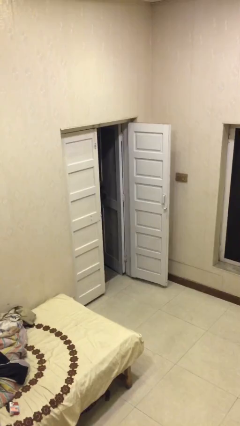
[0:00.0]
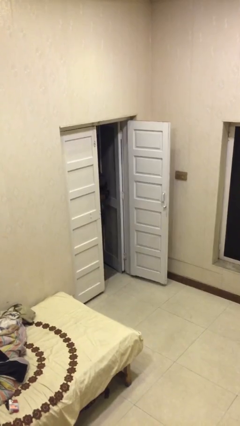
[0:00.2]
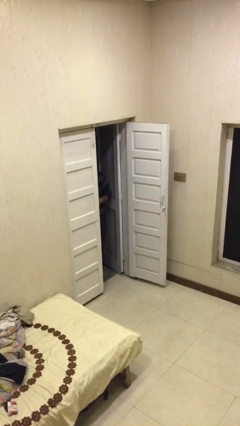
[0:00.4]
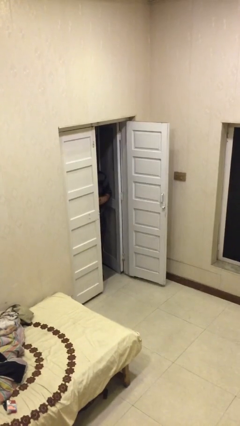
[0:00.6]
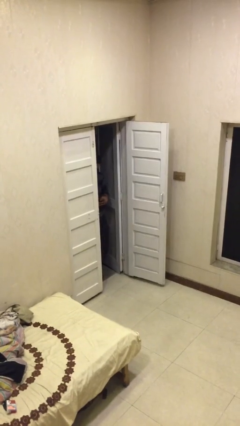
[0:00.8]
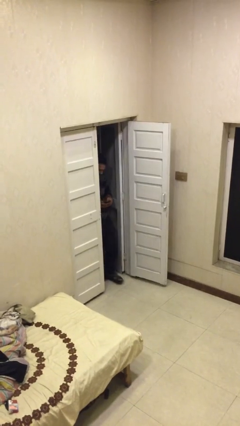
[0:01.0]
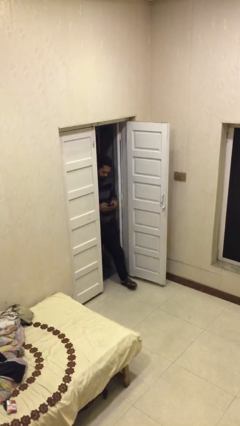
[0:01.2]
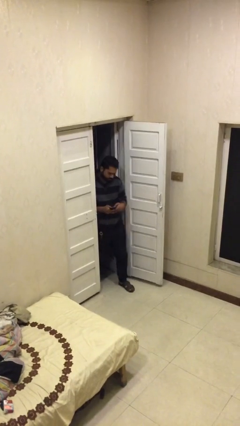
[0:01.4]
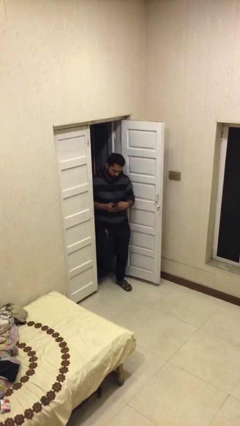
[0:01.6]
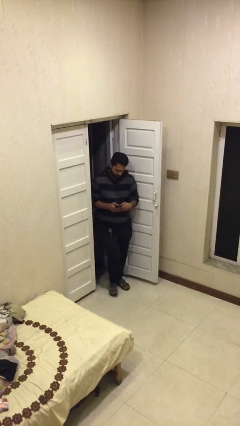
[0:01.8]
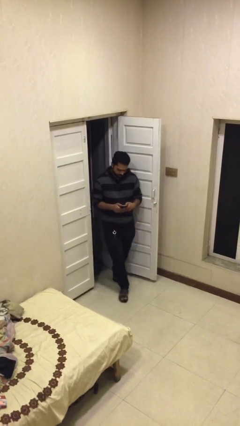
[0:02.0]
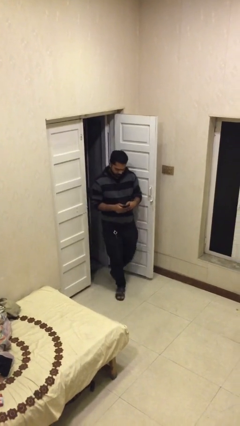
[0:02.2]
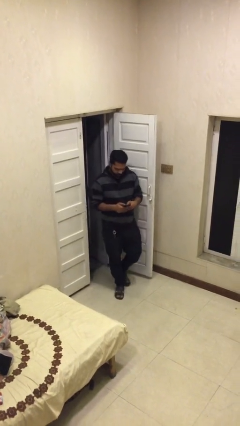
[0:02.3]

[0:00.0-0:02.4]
person enters scene through structure

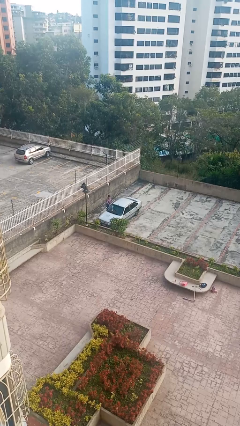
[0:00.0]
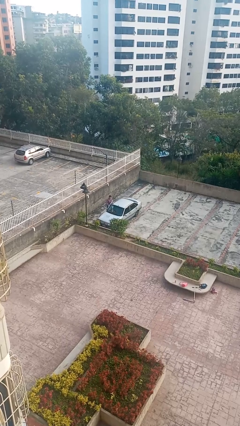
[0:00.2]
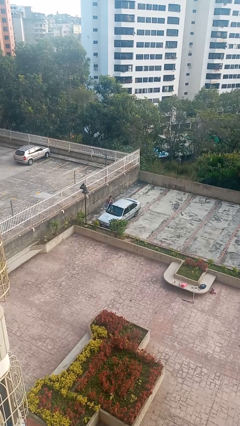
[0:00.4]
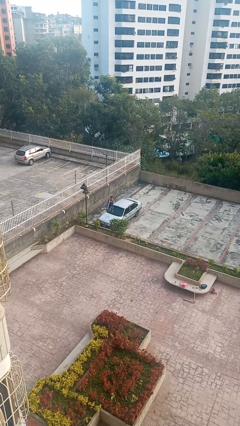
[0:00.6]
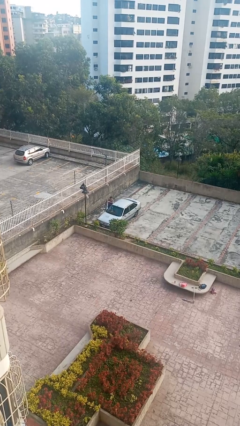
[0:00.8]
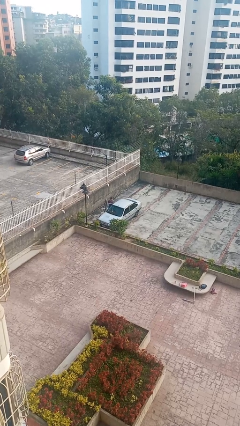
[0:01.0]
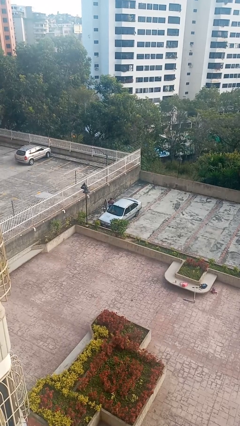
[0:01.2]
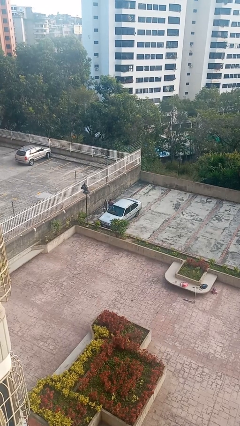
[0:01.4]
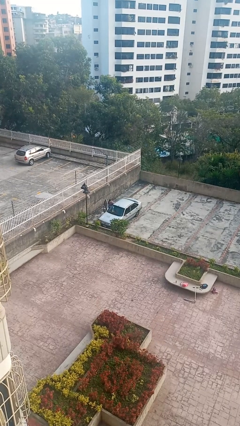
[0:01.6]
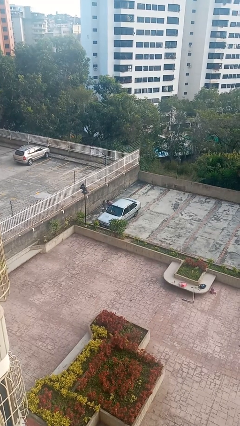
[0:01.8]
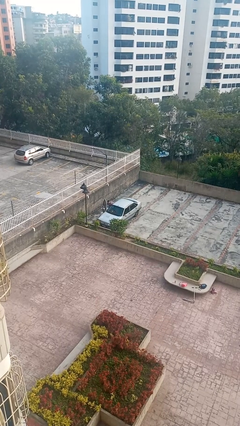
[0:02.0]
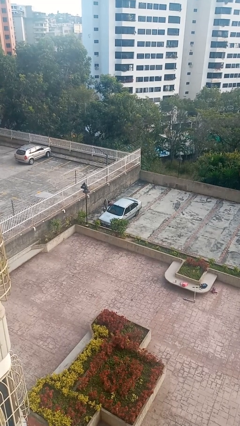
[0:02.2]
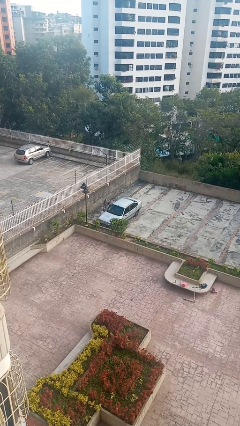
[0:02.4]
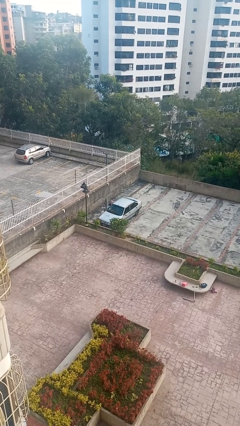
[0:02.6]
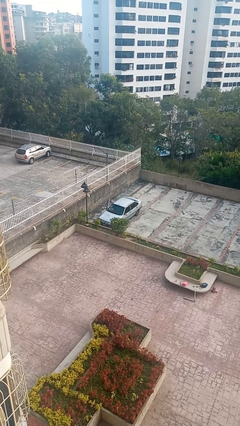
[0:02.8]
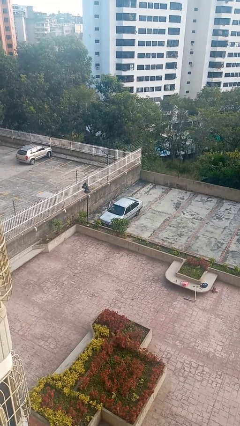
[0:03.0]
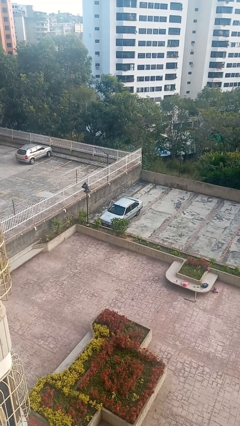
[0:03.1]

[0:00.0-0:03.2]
car picks up person

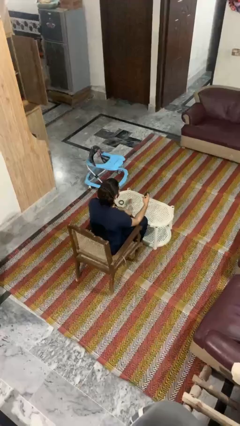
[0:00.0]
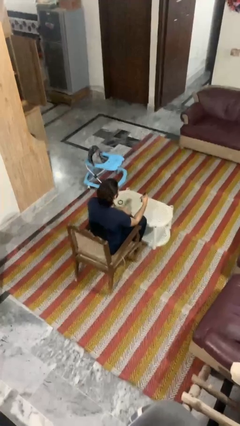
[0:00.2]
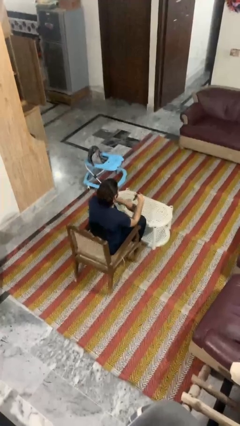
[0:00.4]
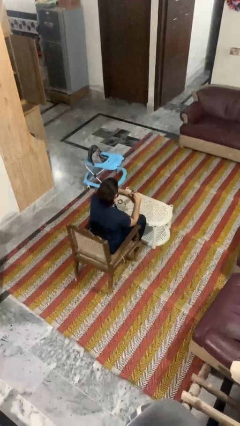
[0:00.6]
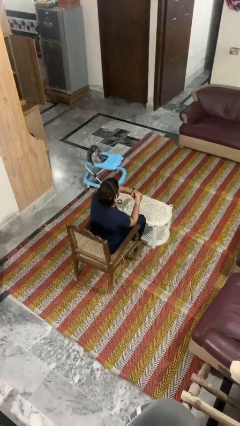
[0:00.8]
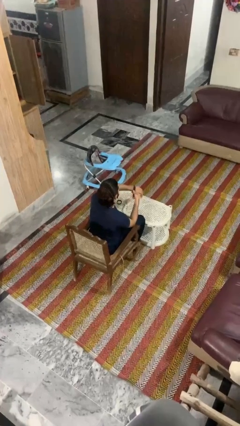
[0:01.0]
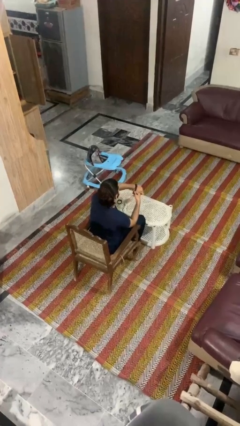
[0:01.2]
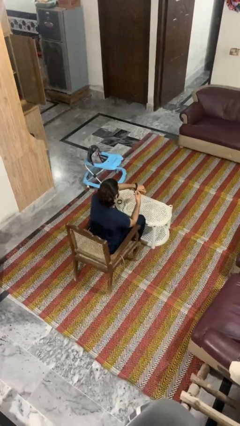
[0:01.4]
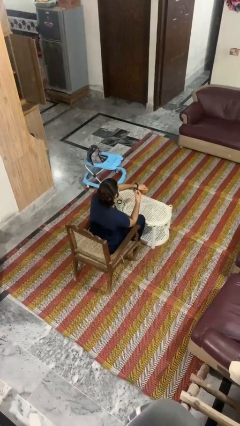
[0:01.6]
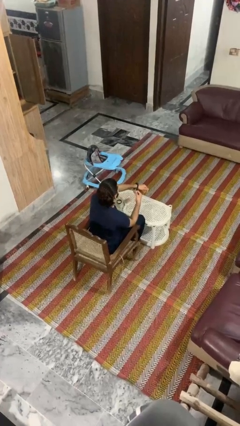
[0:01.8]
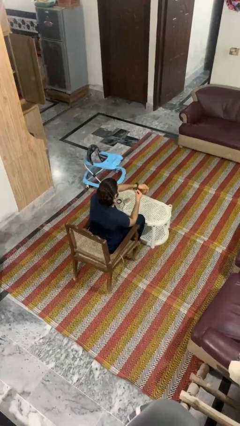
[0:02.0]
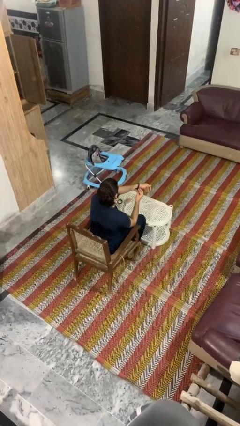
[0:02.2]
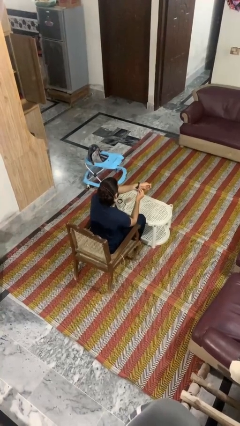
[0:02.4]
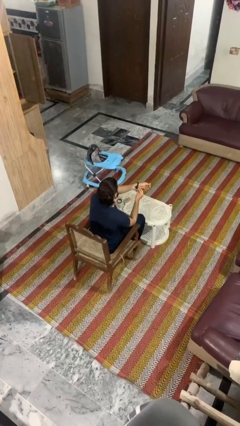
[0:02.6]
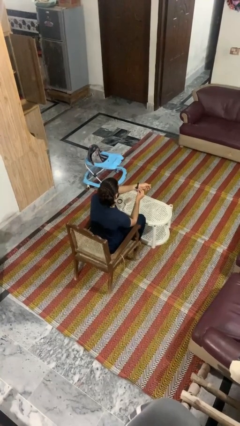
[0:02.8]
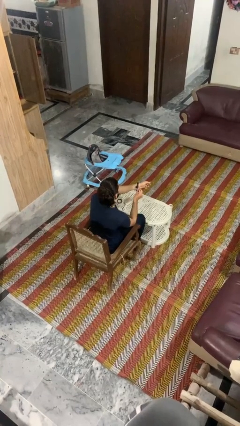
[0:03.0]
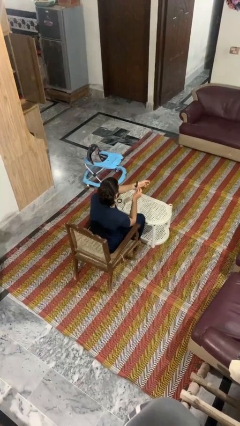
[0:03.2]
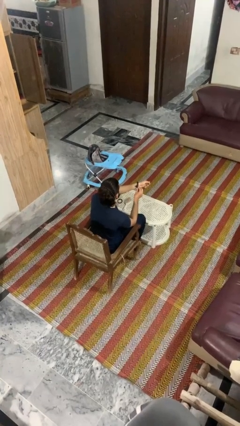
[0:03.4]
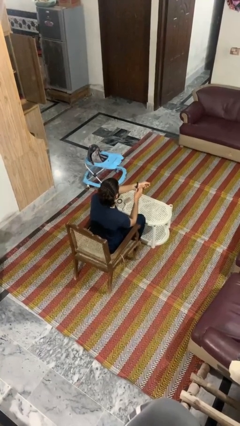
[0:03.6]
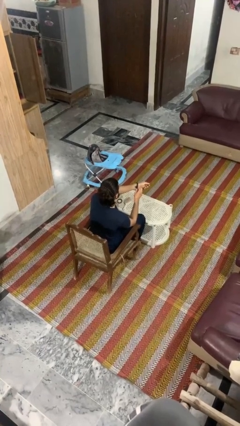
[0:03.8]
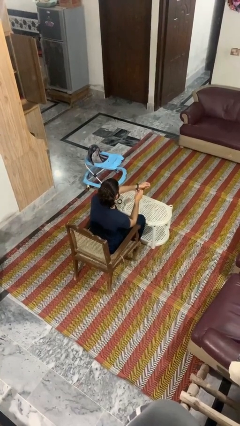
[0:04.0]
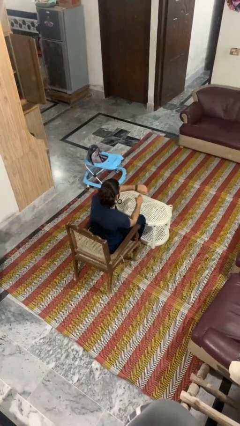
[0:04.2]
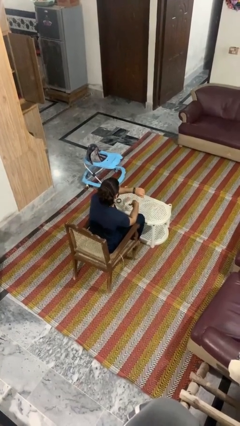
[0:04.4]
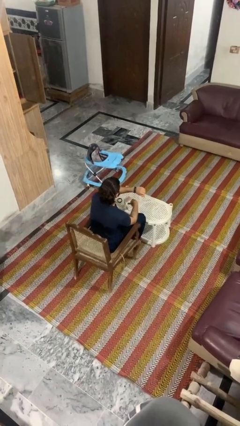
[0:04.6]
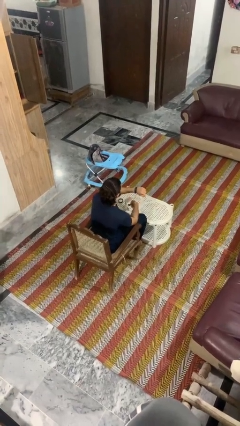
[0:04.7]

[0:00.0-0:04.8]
person puts on wristwatch

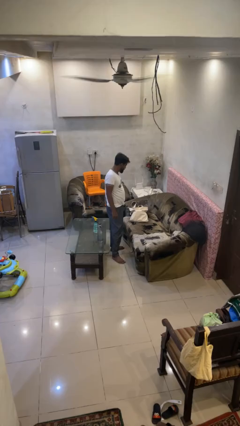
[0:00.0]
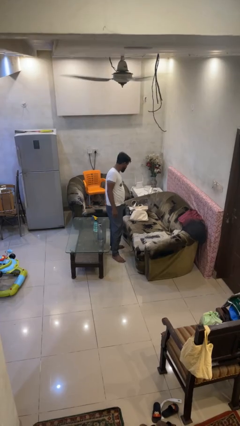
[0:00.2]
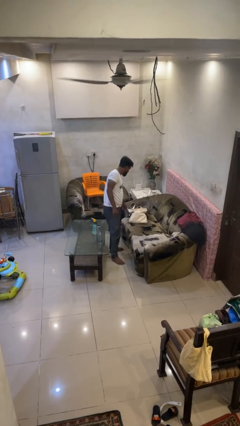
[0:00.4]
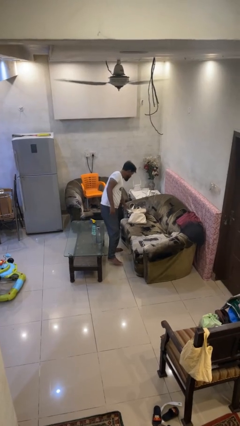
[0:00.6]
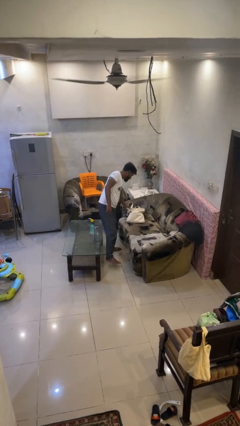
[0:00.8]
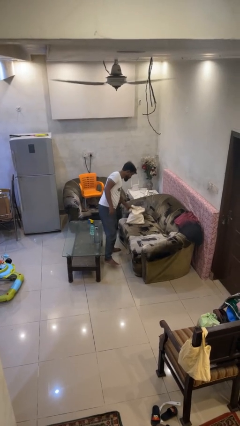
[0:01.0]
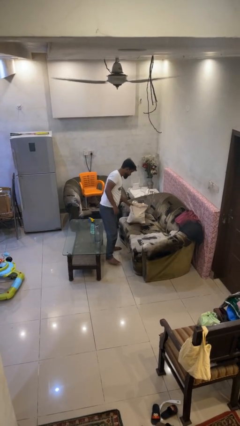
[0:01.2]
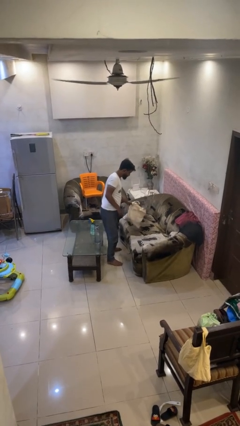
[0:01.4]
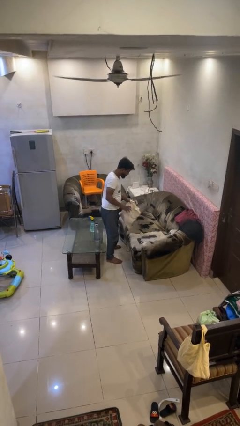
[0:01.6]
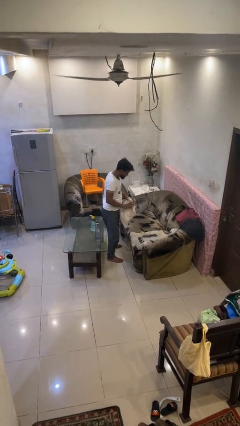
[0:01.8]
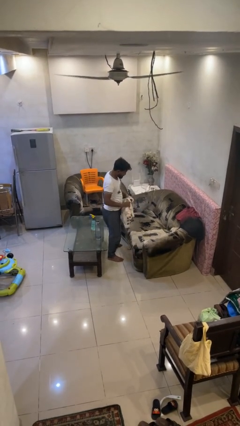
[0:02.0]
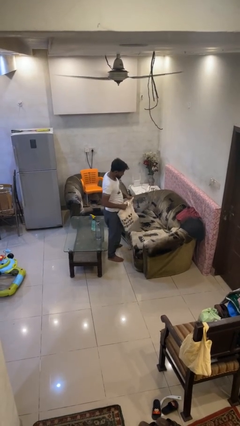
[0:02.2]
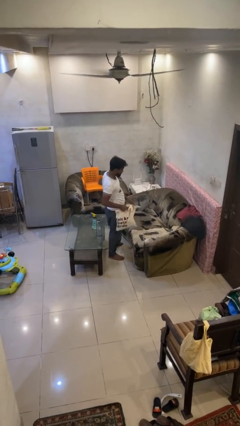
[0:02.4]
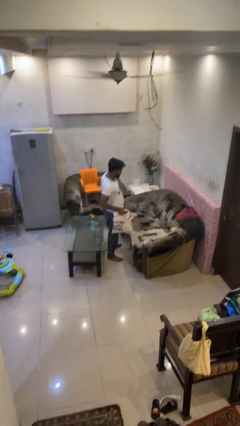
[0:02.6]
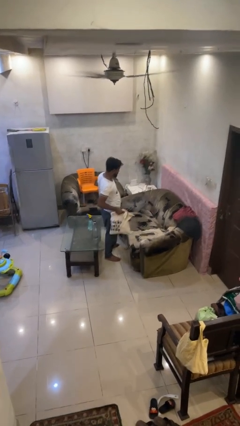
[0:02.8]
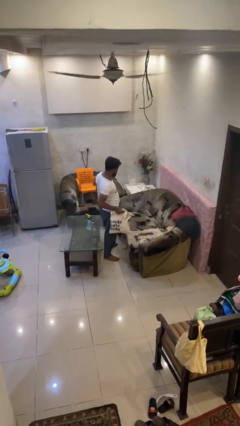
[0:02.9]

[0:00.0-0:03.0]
person picks up object from couch

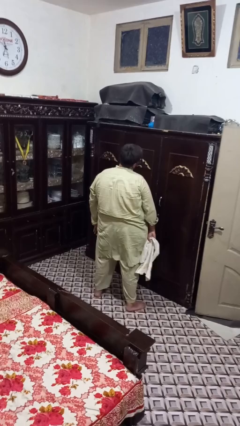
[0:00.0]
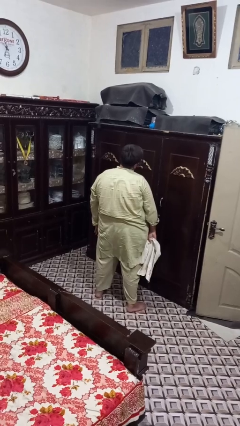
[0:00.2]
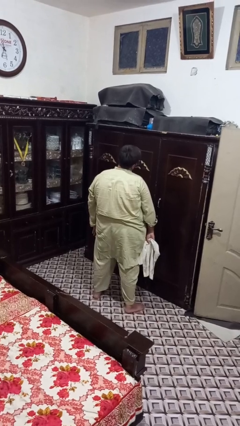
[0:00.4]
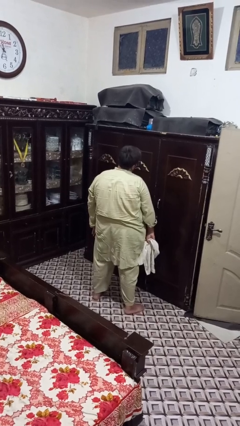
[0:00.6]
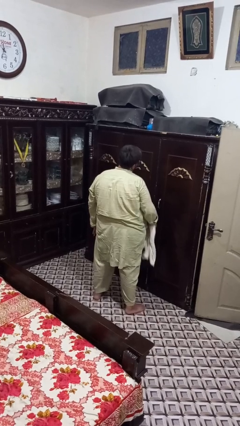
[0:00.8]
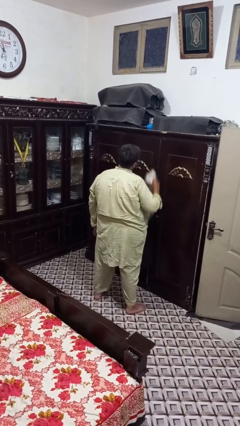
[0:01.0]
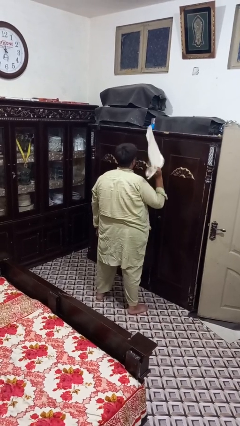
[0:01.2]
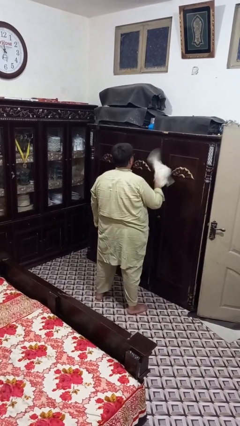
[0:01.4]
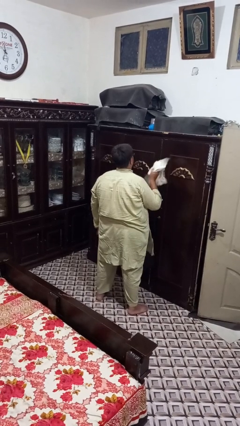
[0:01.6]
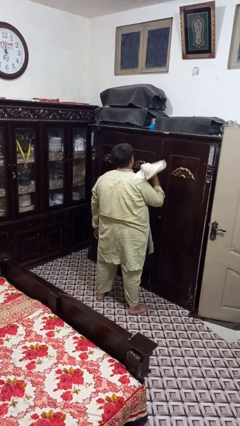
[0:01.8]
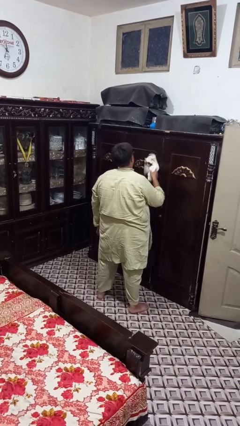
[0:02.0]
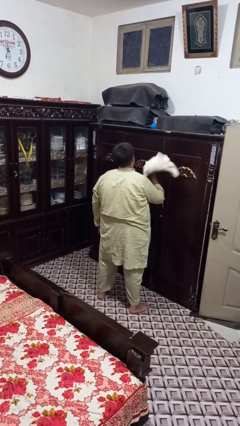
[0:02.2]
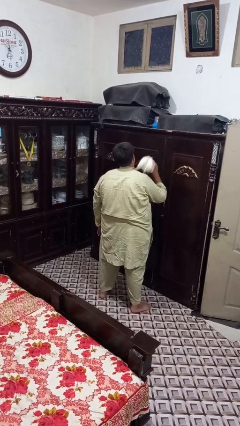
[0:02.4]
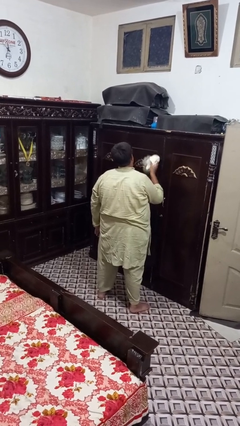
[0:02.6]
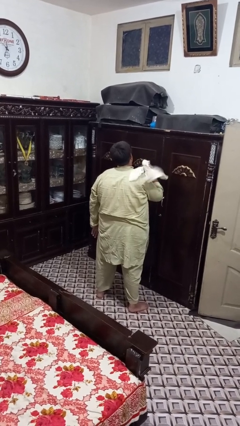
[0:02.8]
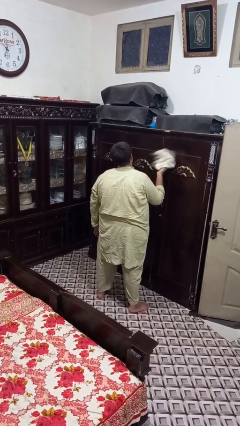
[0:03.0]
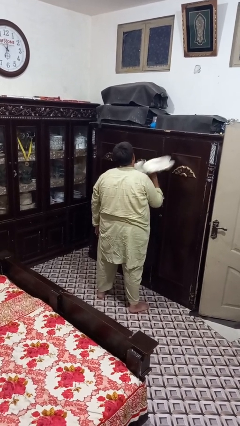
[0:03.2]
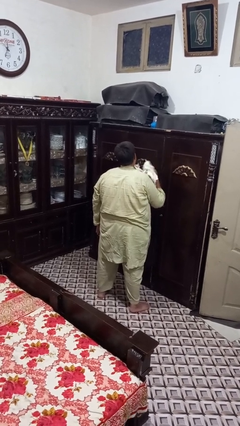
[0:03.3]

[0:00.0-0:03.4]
person dusts furniture

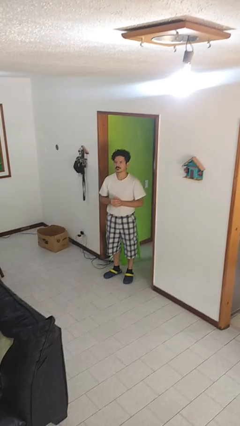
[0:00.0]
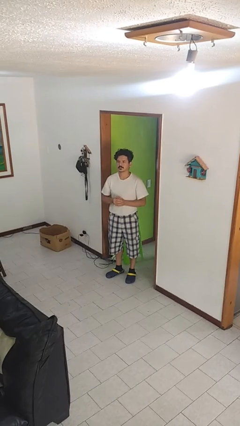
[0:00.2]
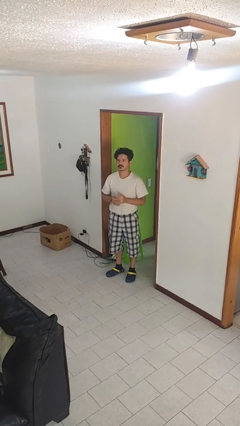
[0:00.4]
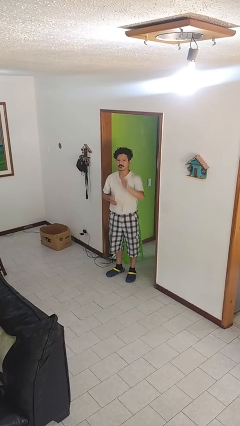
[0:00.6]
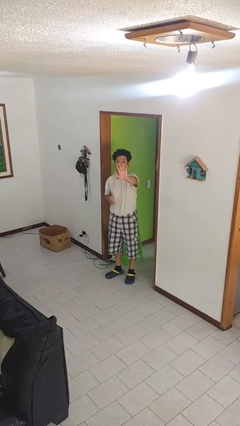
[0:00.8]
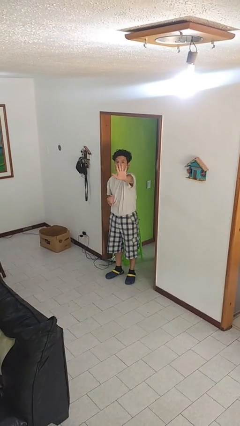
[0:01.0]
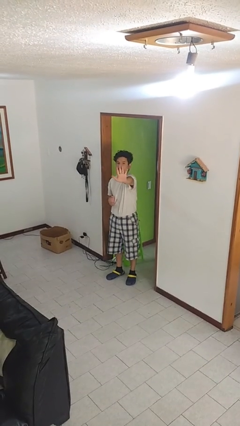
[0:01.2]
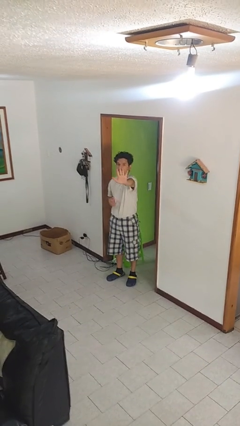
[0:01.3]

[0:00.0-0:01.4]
person gestures stop
